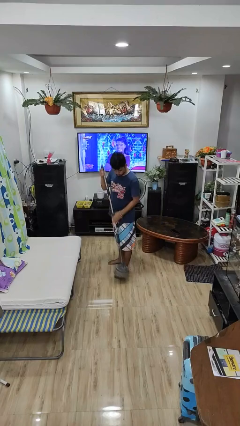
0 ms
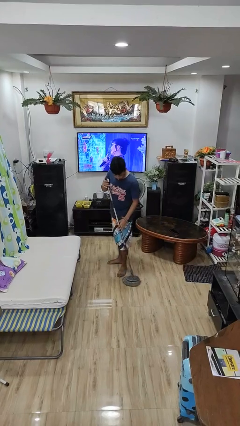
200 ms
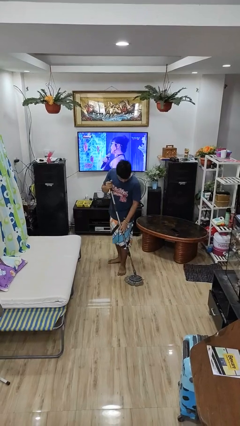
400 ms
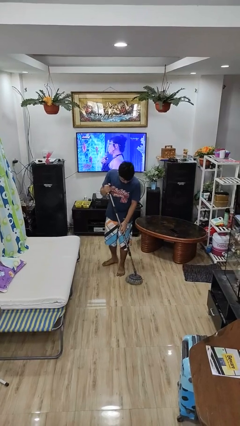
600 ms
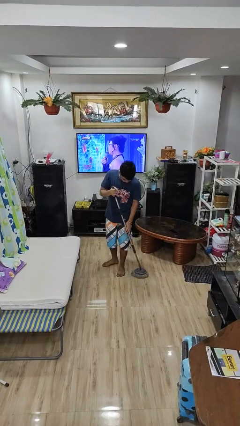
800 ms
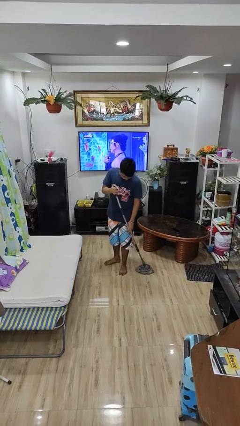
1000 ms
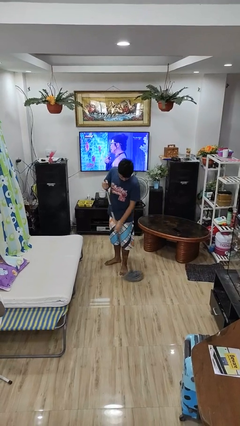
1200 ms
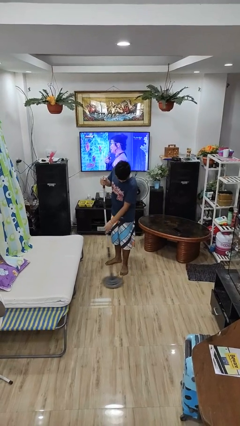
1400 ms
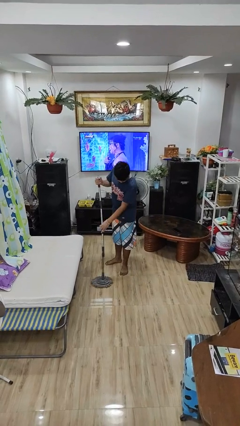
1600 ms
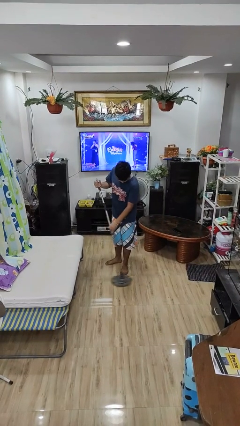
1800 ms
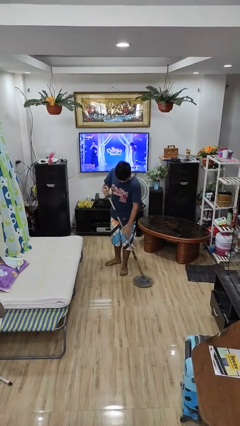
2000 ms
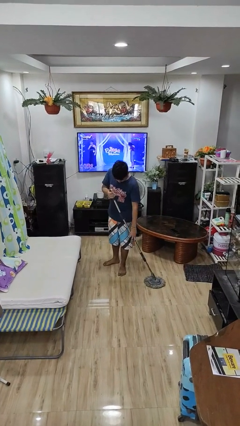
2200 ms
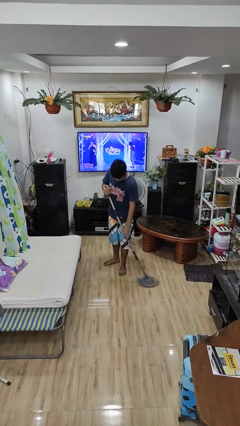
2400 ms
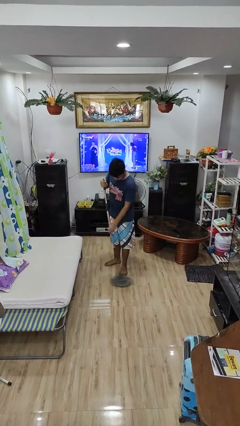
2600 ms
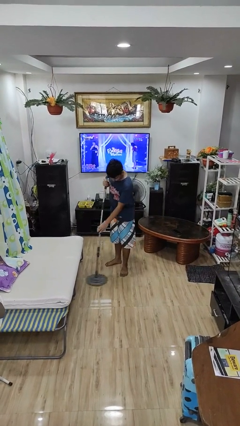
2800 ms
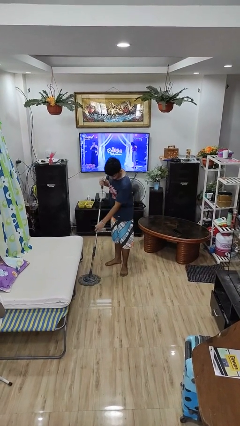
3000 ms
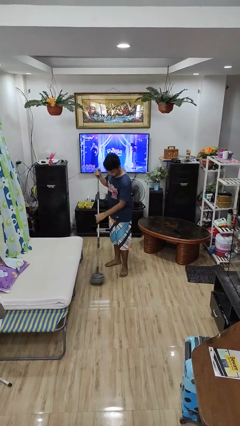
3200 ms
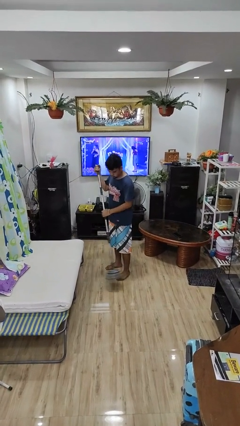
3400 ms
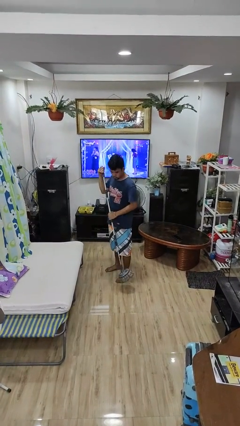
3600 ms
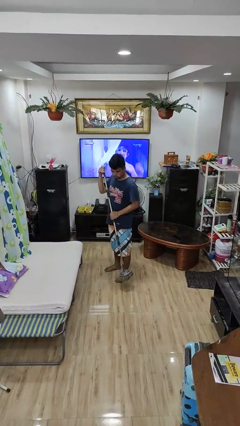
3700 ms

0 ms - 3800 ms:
person mops

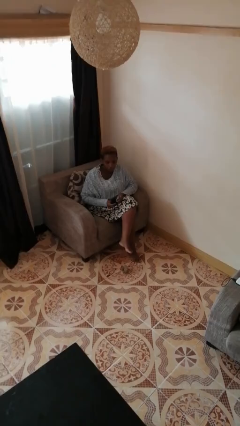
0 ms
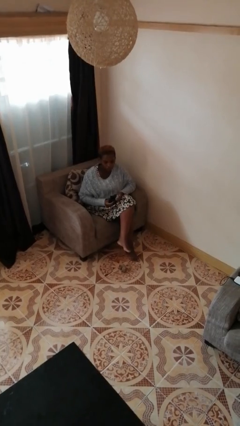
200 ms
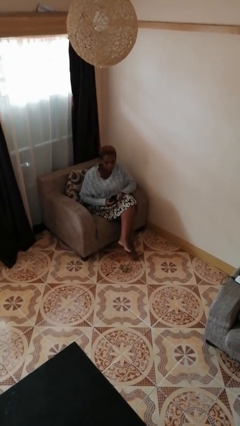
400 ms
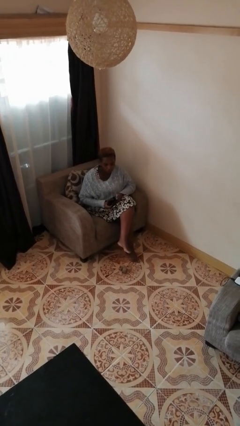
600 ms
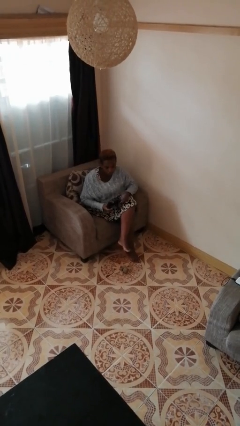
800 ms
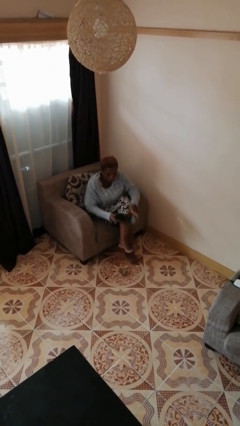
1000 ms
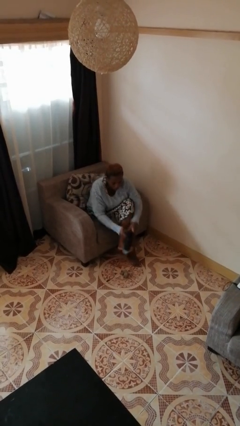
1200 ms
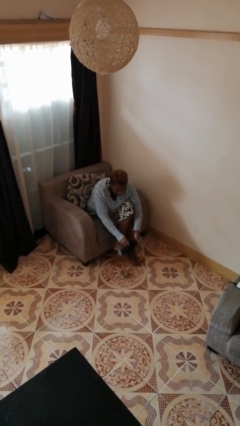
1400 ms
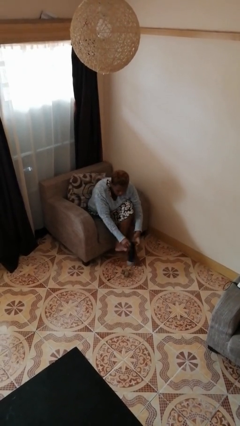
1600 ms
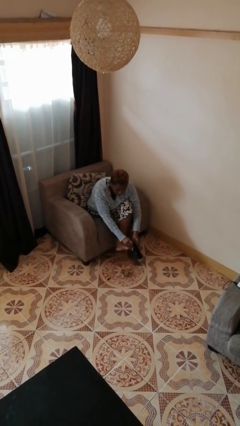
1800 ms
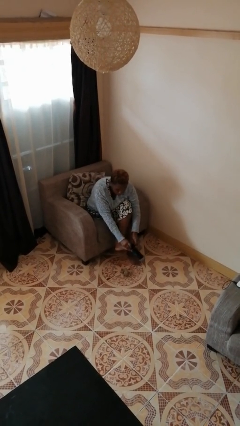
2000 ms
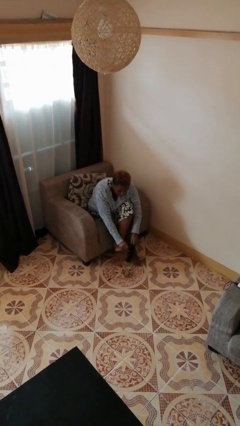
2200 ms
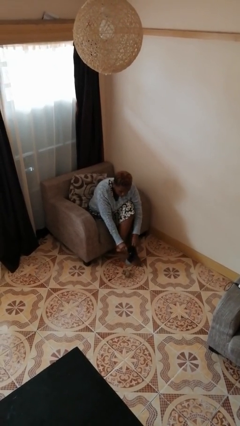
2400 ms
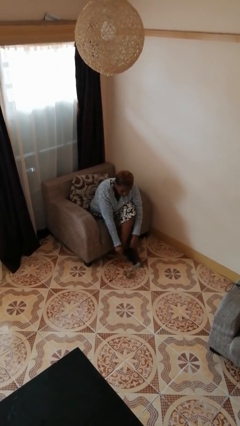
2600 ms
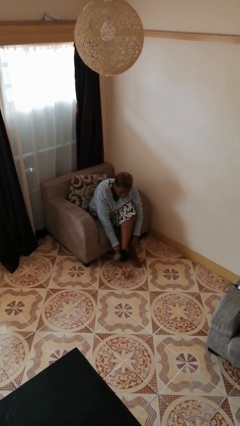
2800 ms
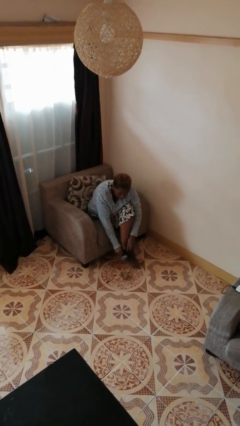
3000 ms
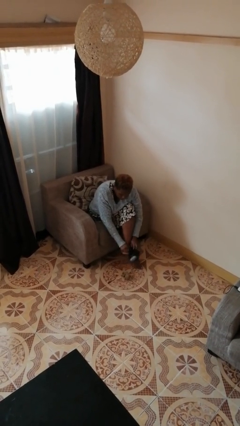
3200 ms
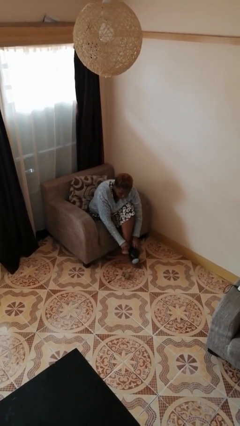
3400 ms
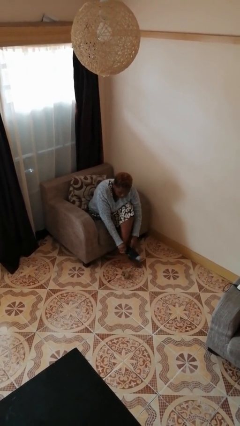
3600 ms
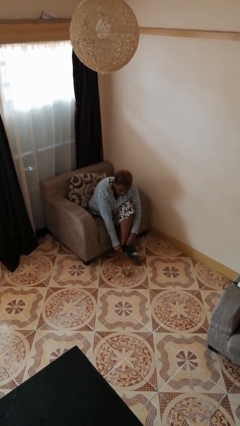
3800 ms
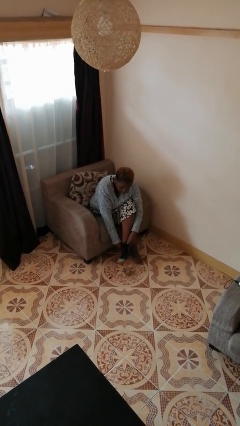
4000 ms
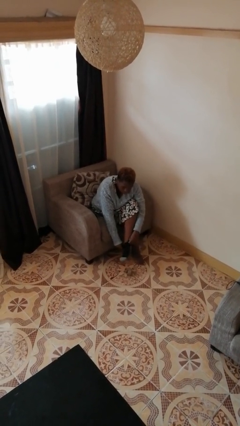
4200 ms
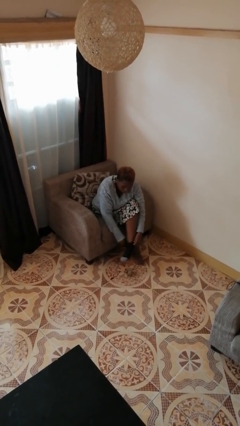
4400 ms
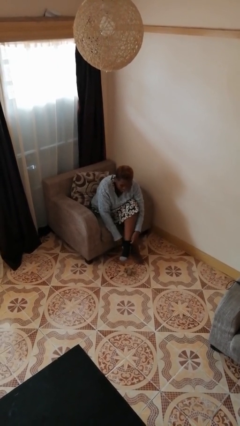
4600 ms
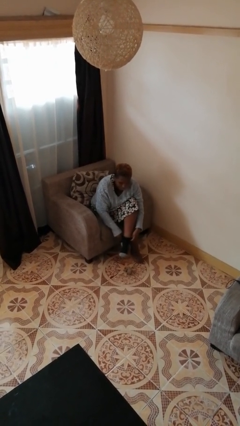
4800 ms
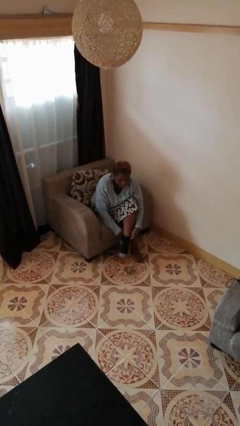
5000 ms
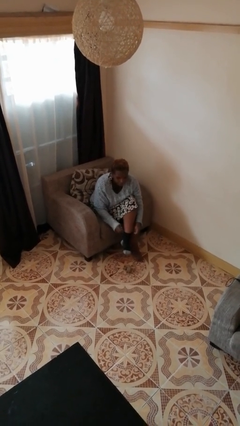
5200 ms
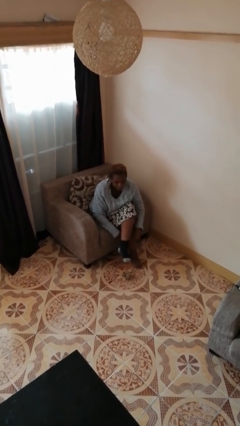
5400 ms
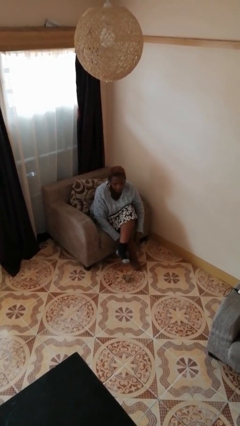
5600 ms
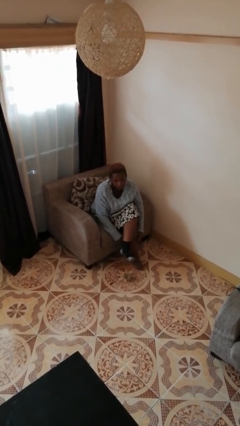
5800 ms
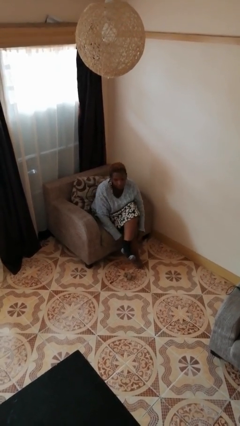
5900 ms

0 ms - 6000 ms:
person puts on socks

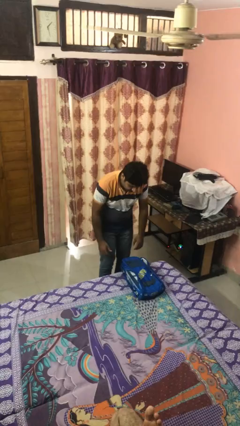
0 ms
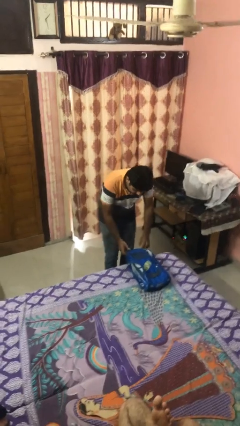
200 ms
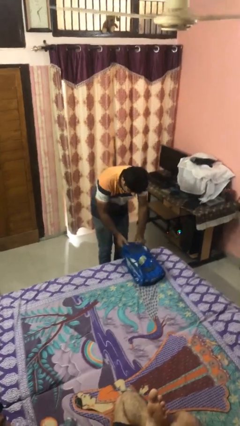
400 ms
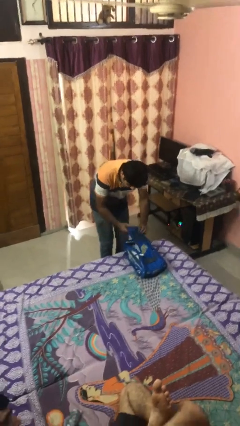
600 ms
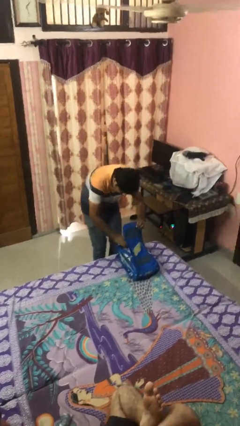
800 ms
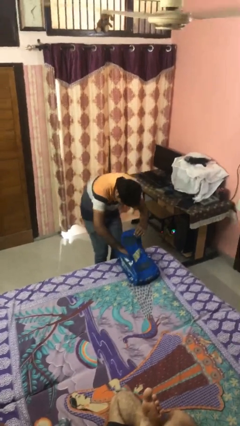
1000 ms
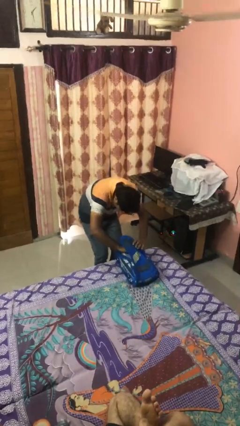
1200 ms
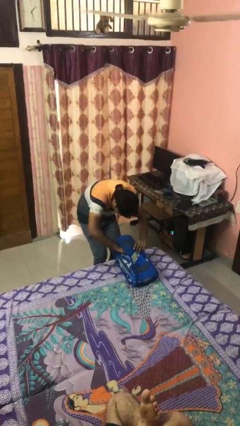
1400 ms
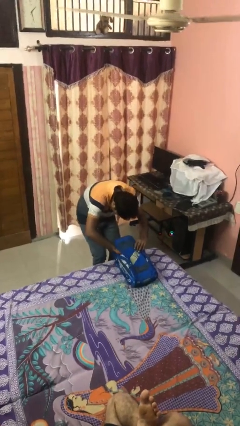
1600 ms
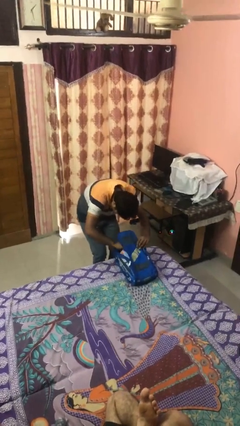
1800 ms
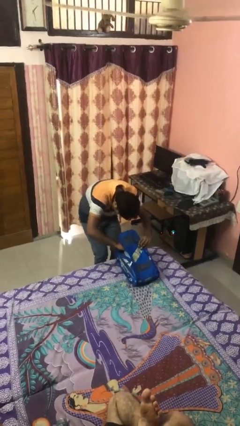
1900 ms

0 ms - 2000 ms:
person searches in backpack

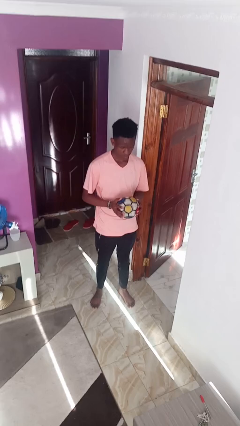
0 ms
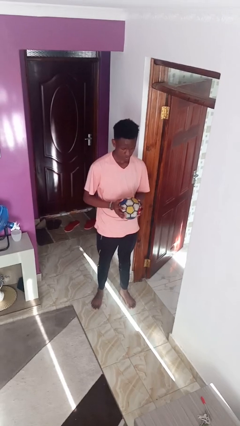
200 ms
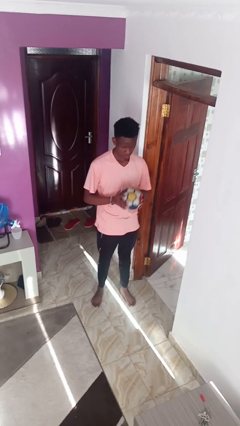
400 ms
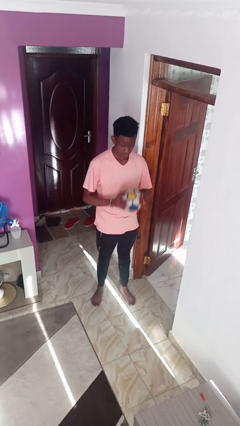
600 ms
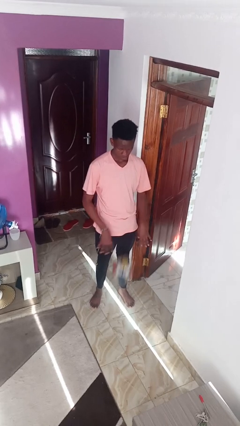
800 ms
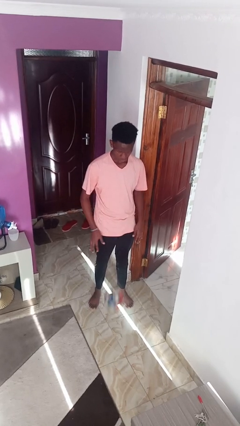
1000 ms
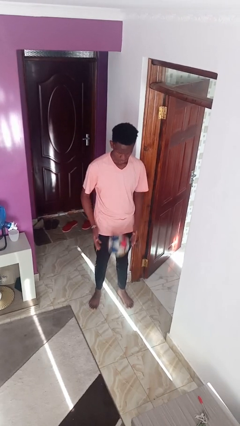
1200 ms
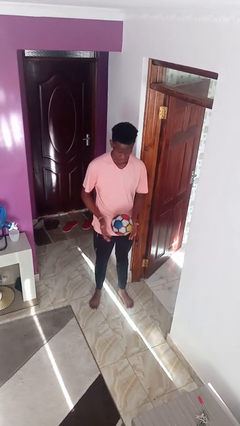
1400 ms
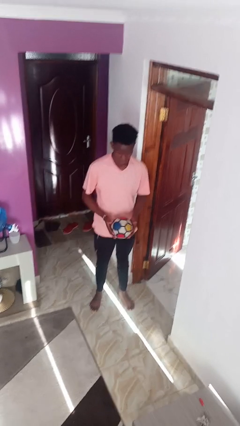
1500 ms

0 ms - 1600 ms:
person bounces ball on floor

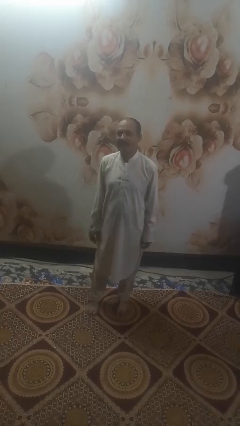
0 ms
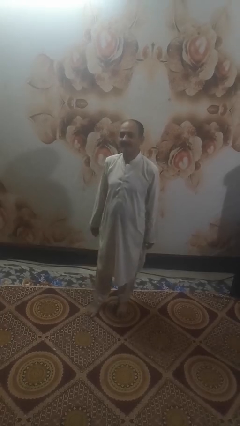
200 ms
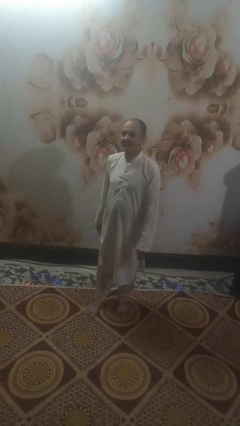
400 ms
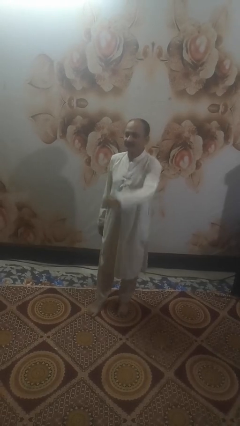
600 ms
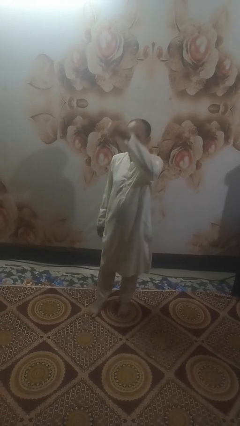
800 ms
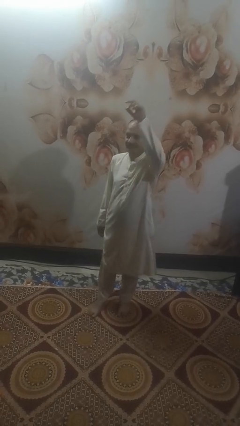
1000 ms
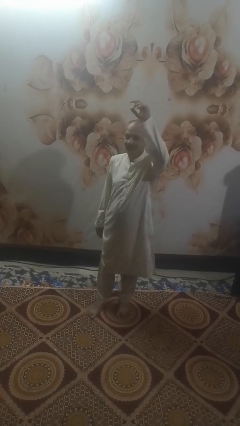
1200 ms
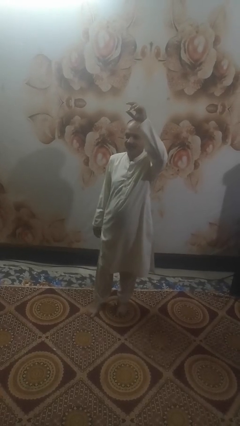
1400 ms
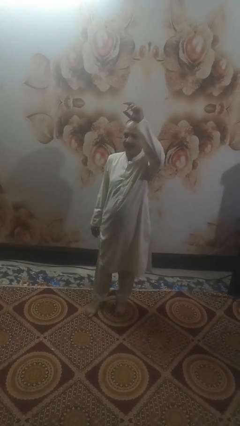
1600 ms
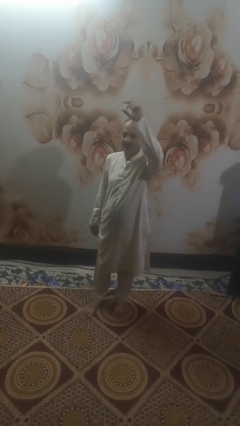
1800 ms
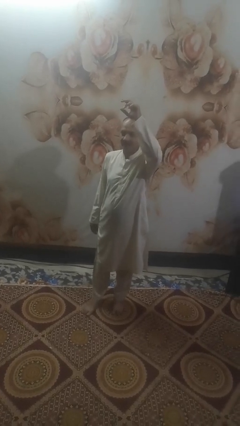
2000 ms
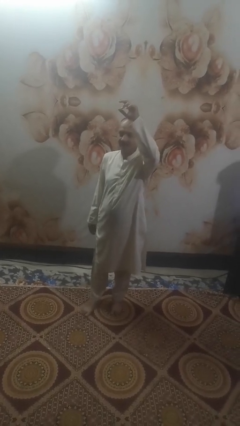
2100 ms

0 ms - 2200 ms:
person gestures swipe up

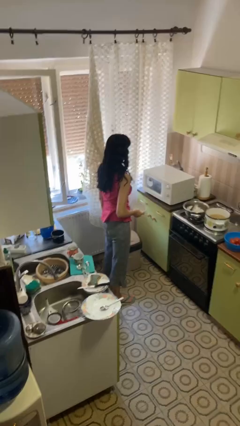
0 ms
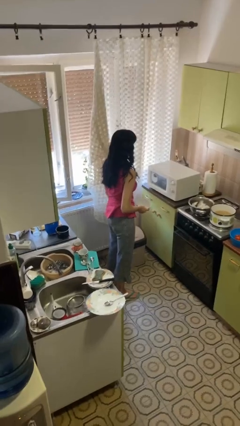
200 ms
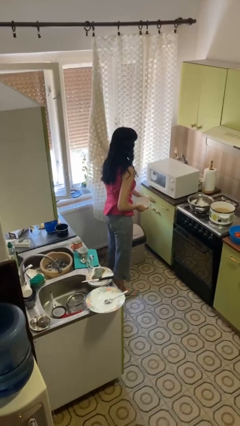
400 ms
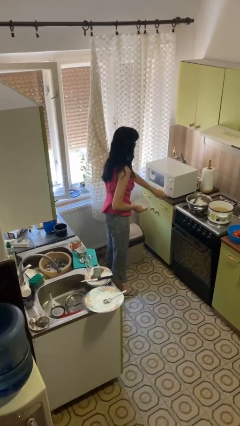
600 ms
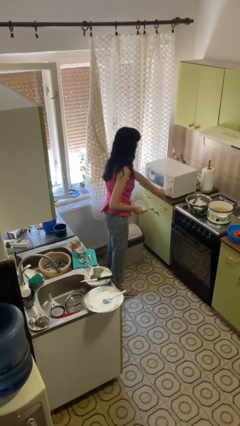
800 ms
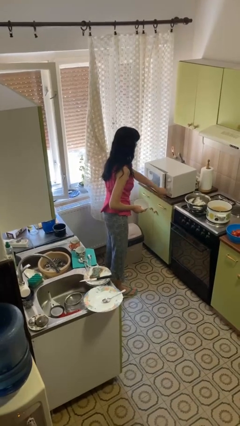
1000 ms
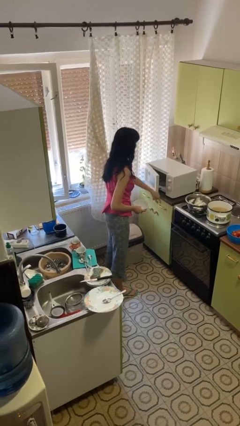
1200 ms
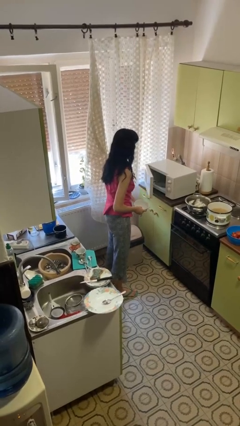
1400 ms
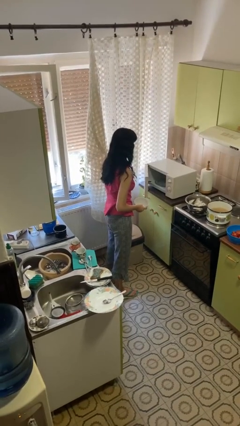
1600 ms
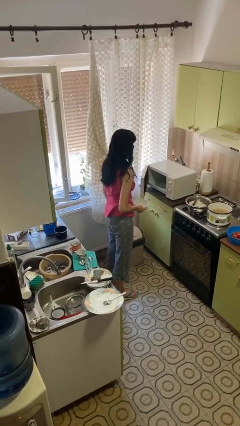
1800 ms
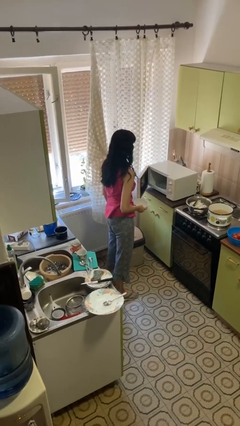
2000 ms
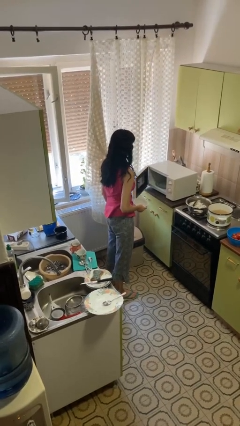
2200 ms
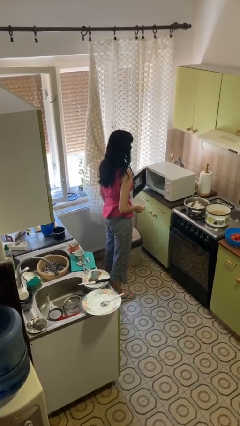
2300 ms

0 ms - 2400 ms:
person opens microwave
